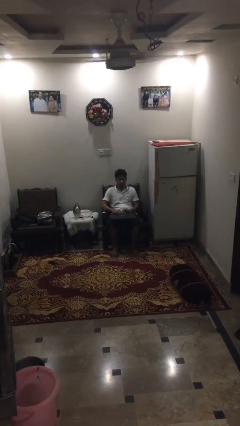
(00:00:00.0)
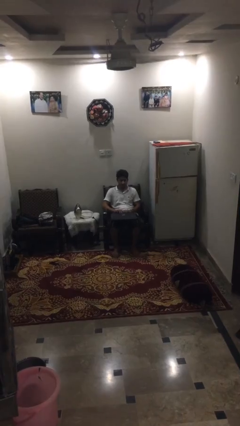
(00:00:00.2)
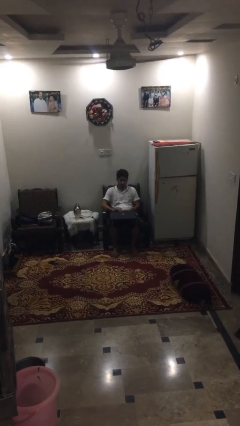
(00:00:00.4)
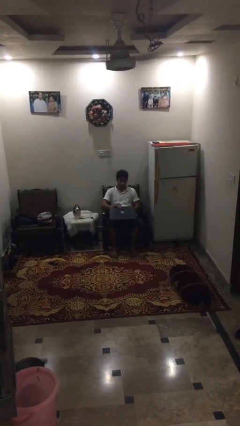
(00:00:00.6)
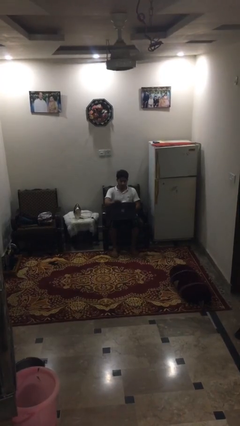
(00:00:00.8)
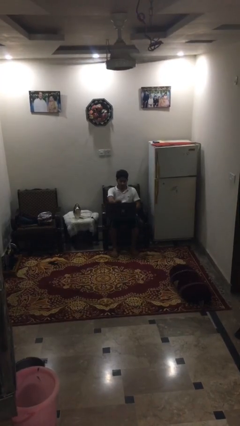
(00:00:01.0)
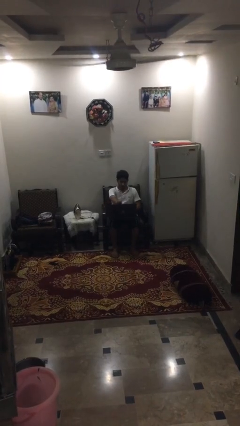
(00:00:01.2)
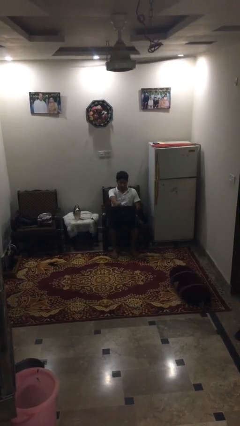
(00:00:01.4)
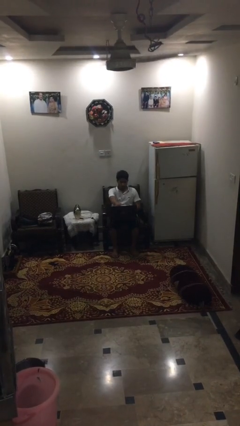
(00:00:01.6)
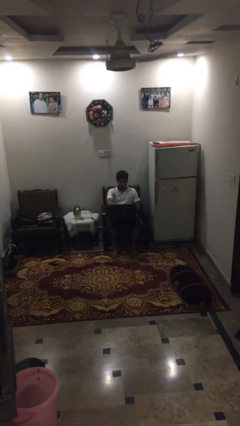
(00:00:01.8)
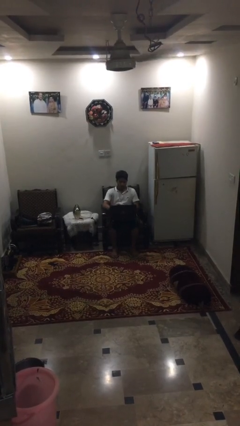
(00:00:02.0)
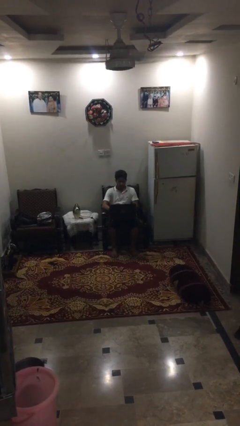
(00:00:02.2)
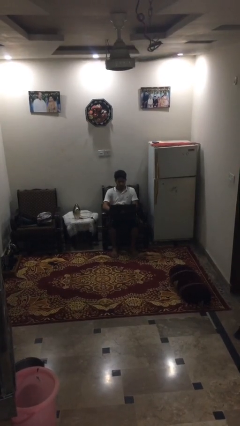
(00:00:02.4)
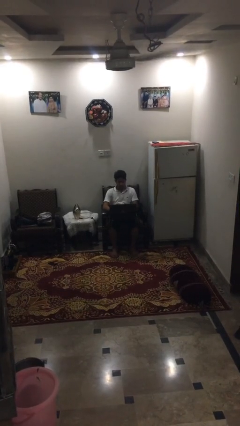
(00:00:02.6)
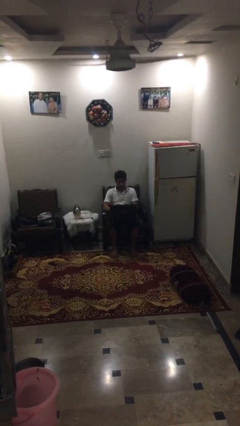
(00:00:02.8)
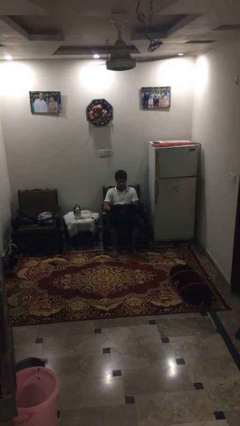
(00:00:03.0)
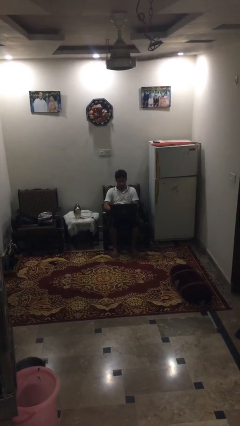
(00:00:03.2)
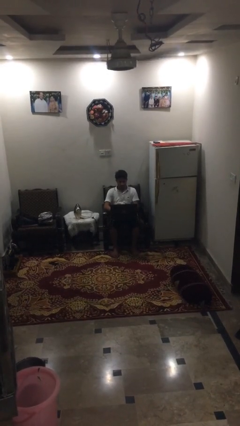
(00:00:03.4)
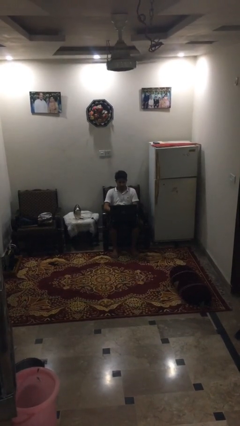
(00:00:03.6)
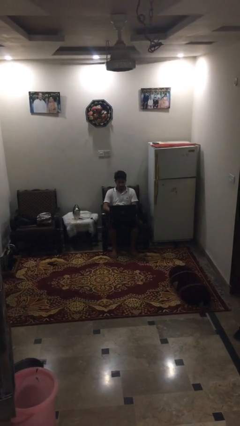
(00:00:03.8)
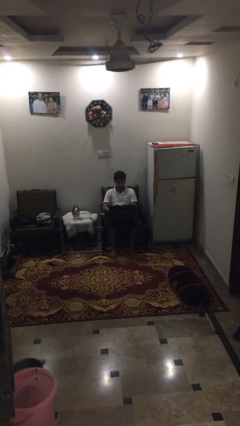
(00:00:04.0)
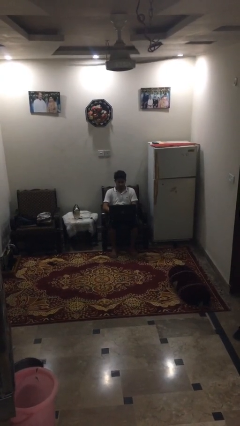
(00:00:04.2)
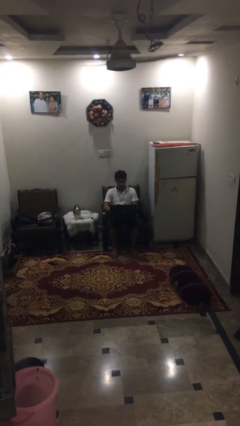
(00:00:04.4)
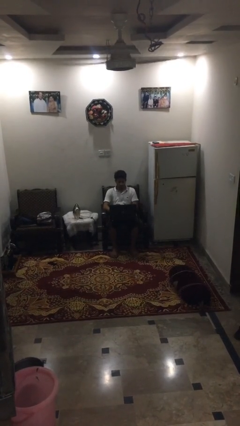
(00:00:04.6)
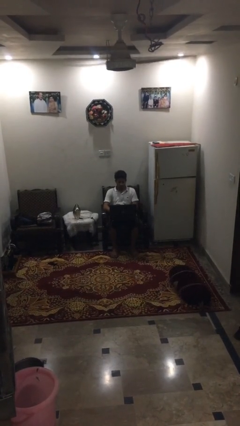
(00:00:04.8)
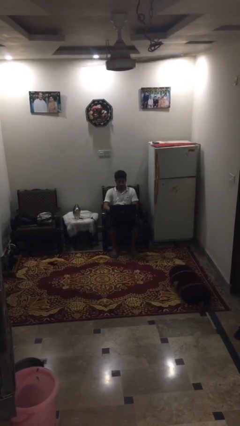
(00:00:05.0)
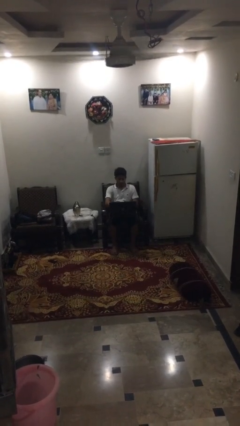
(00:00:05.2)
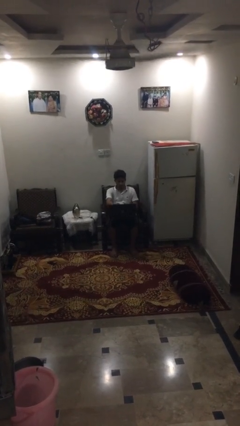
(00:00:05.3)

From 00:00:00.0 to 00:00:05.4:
person opens laptop

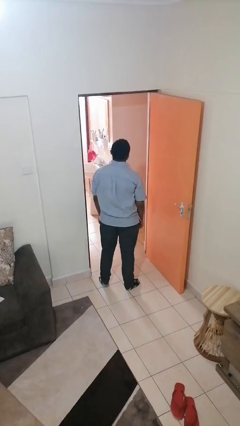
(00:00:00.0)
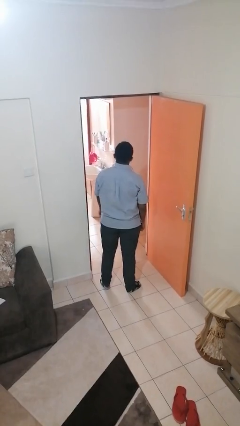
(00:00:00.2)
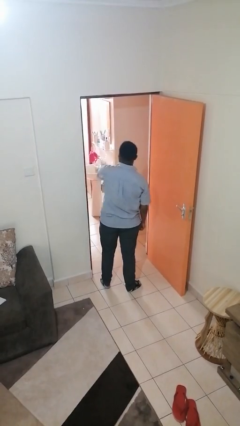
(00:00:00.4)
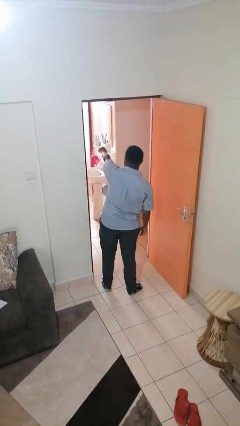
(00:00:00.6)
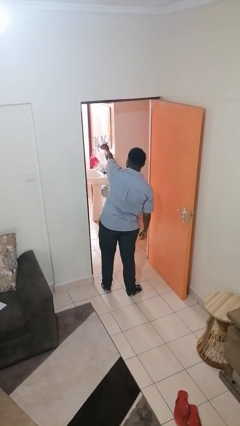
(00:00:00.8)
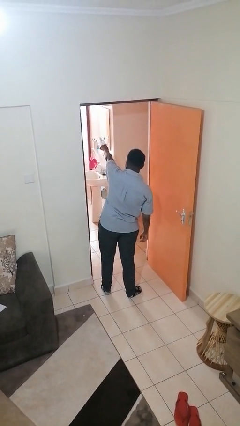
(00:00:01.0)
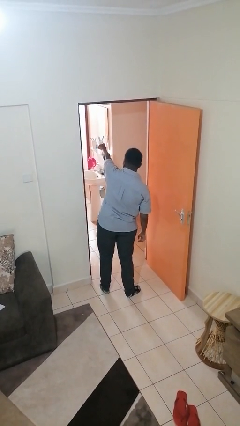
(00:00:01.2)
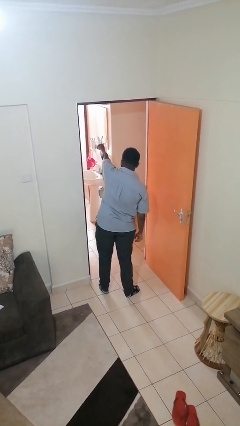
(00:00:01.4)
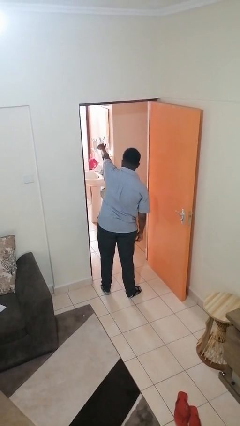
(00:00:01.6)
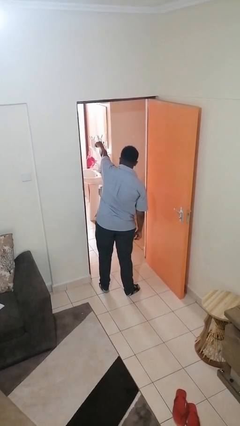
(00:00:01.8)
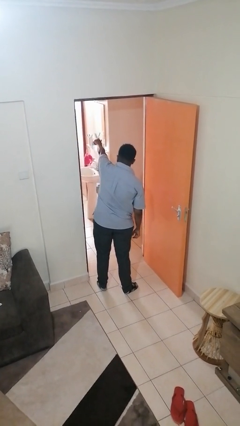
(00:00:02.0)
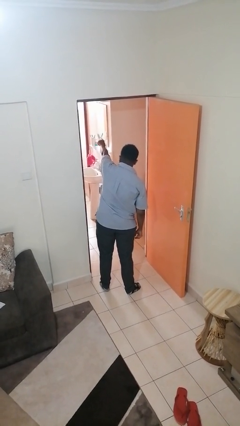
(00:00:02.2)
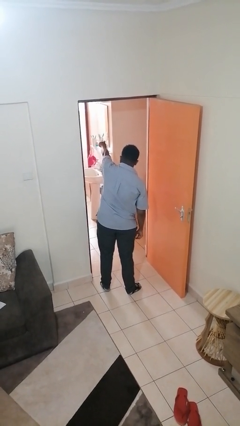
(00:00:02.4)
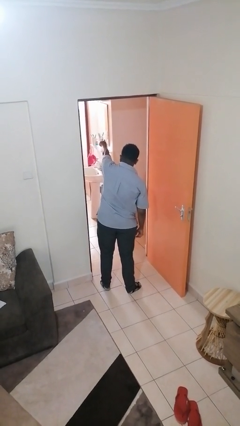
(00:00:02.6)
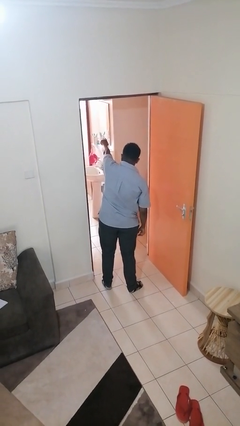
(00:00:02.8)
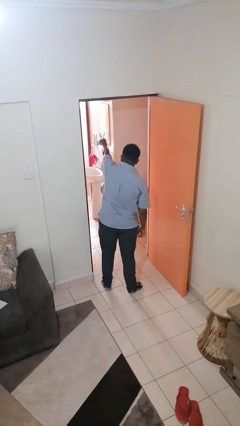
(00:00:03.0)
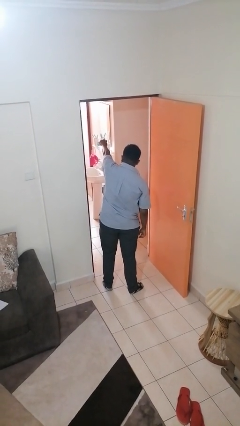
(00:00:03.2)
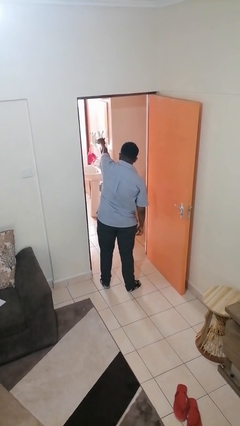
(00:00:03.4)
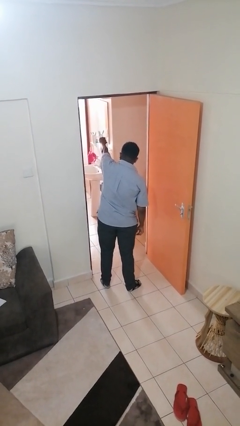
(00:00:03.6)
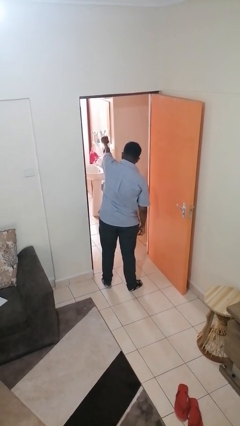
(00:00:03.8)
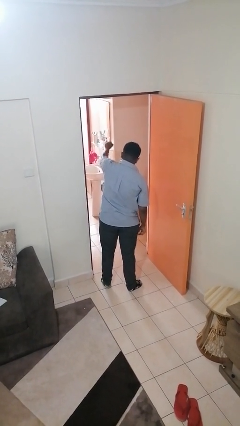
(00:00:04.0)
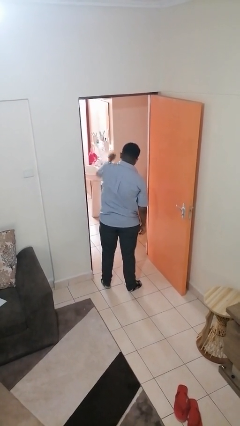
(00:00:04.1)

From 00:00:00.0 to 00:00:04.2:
person points at person

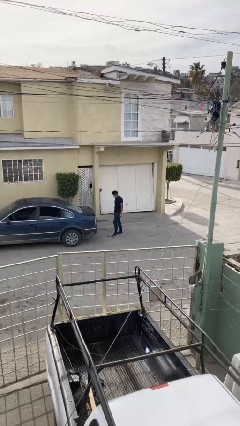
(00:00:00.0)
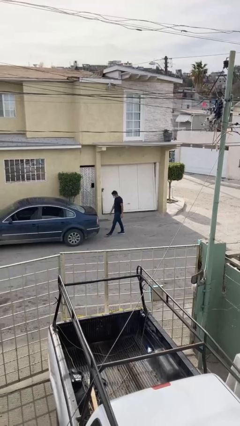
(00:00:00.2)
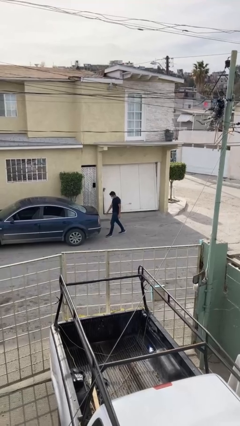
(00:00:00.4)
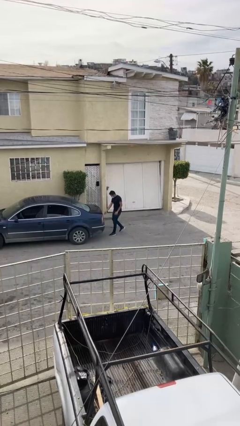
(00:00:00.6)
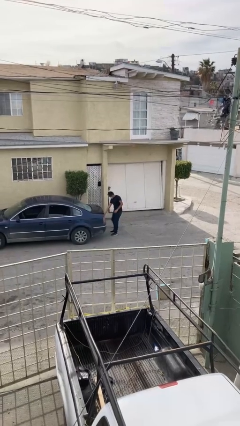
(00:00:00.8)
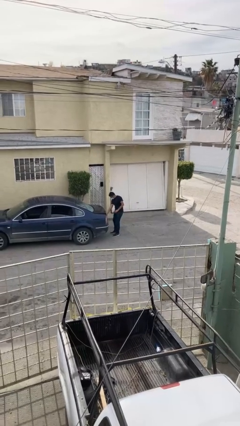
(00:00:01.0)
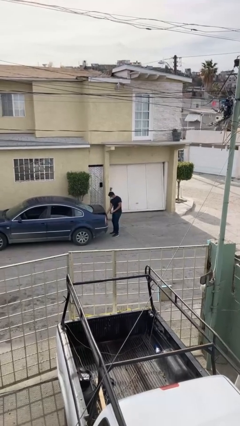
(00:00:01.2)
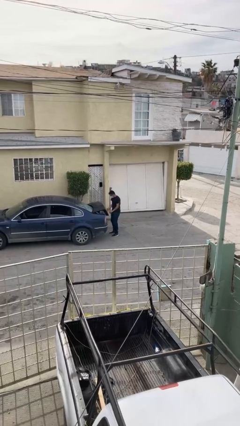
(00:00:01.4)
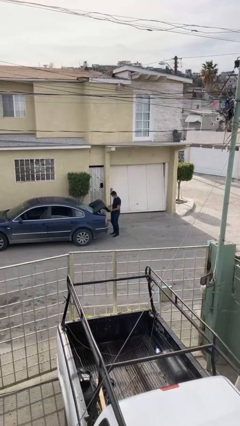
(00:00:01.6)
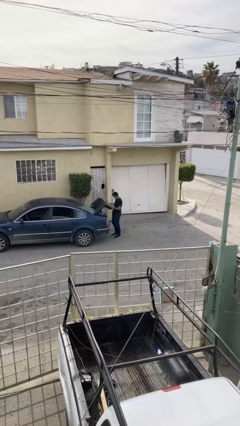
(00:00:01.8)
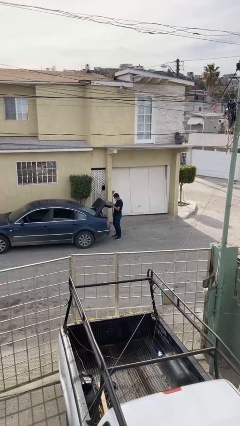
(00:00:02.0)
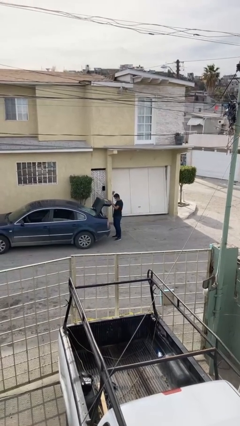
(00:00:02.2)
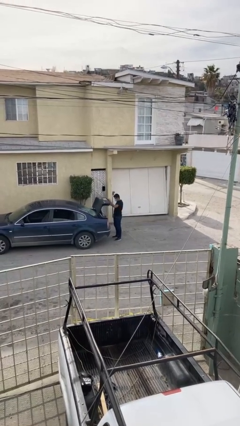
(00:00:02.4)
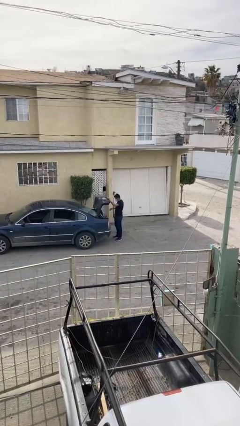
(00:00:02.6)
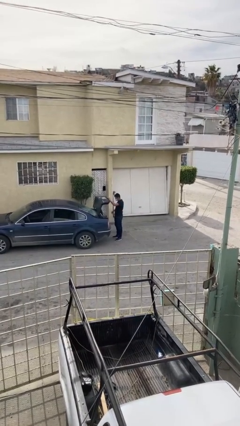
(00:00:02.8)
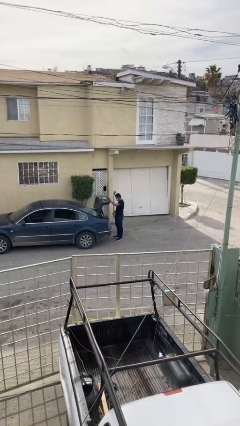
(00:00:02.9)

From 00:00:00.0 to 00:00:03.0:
person opens car trunk

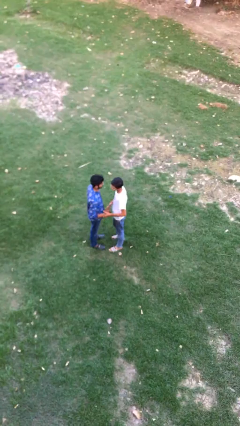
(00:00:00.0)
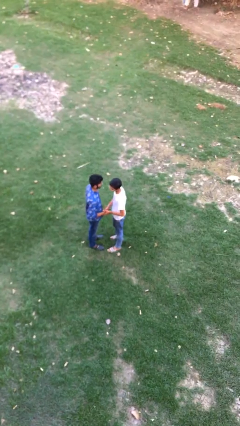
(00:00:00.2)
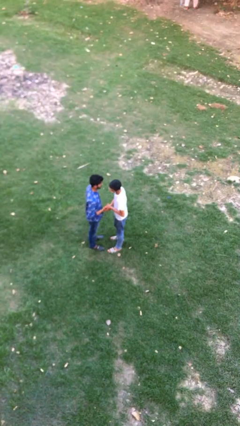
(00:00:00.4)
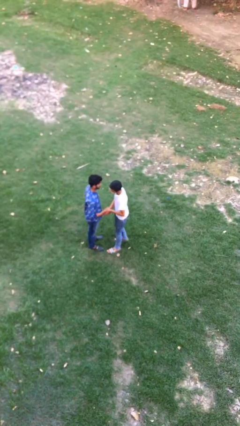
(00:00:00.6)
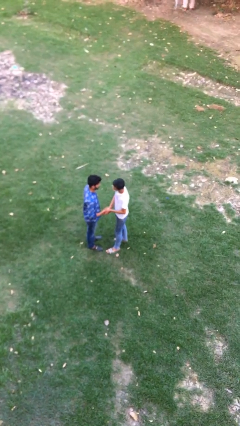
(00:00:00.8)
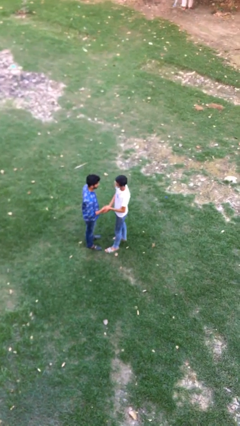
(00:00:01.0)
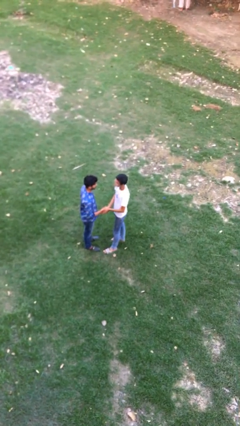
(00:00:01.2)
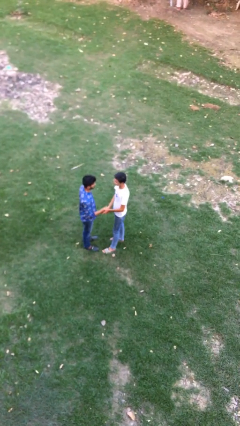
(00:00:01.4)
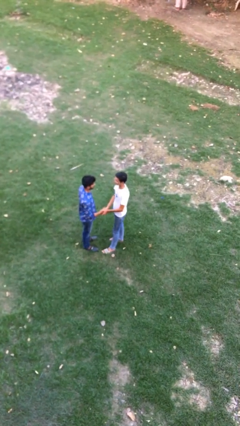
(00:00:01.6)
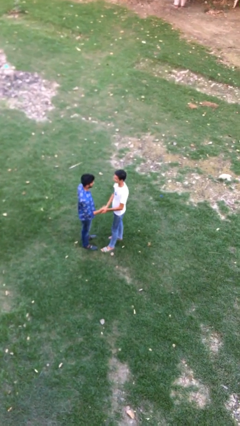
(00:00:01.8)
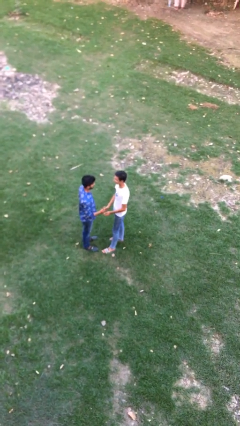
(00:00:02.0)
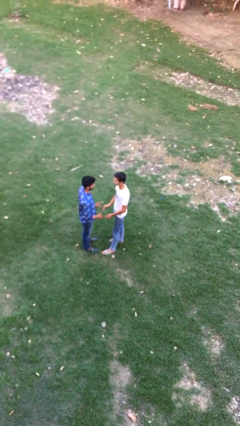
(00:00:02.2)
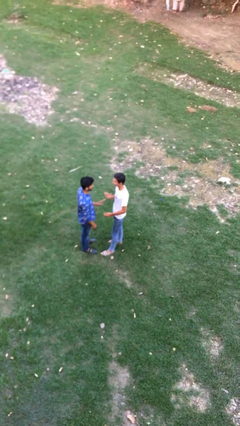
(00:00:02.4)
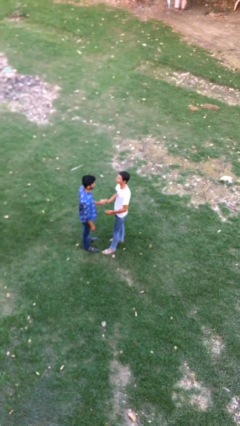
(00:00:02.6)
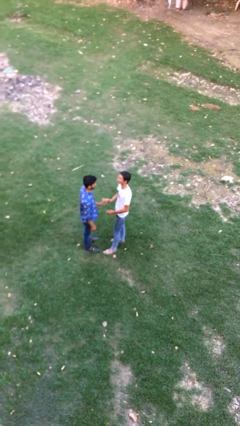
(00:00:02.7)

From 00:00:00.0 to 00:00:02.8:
person shakes hand

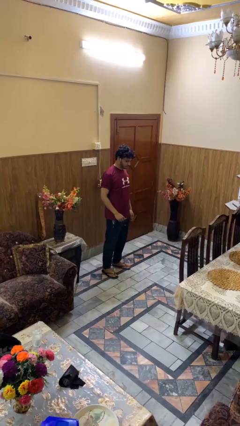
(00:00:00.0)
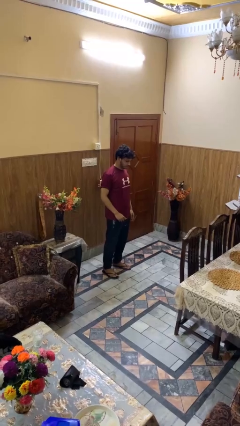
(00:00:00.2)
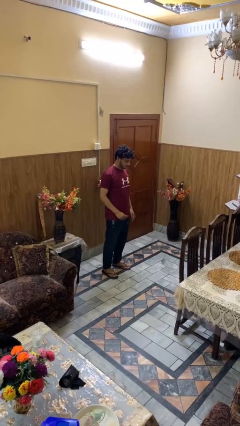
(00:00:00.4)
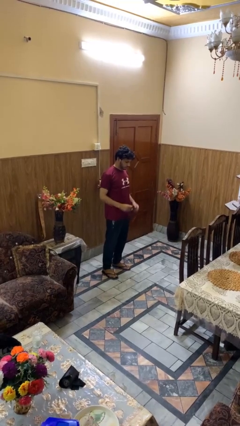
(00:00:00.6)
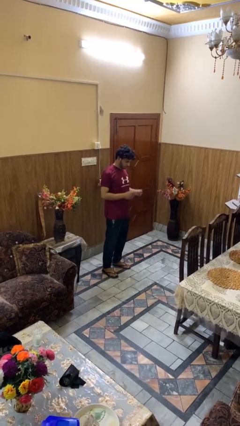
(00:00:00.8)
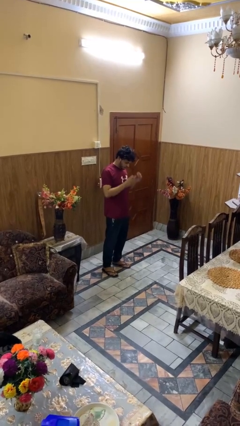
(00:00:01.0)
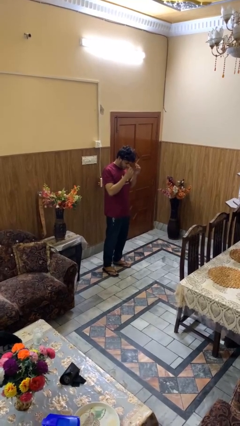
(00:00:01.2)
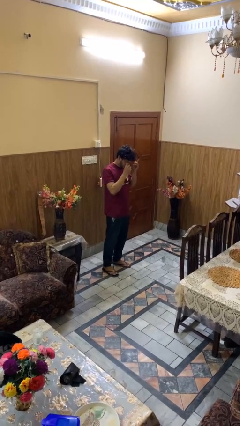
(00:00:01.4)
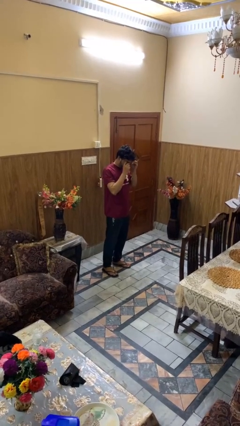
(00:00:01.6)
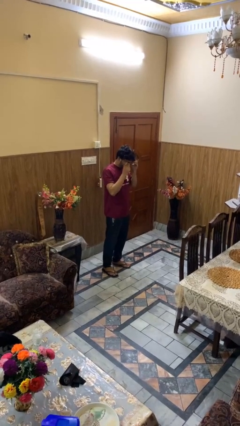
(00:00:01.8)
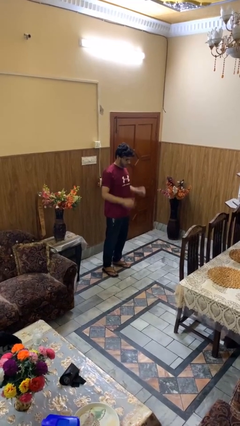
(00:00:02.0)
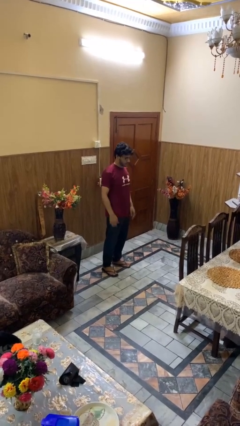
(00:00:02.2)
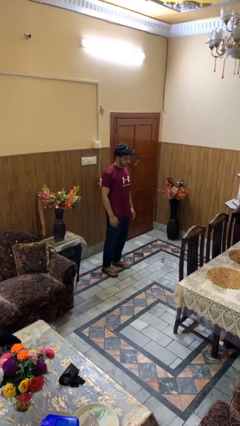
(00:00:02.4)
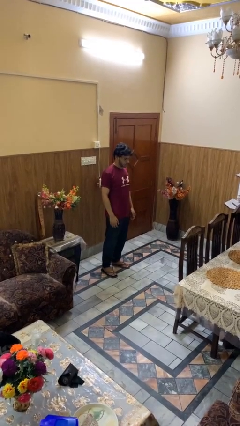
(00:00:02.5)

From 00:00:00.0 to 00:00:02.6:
person puts on glasses
